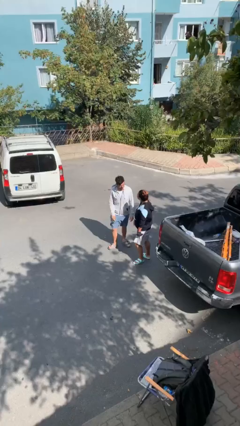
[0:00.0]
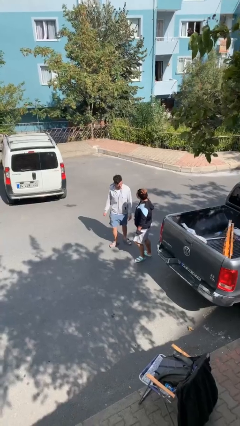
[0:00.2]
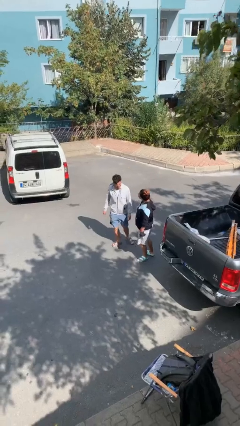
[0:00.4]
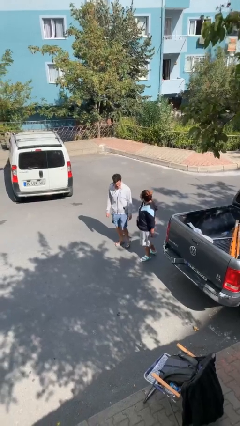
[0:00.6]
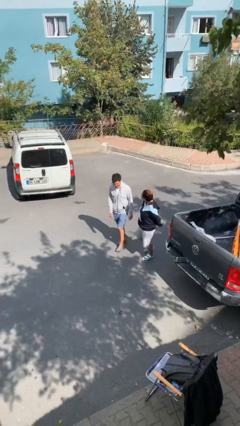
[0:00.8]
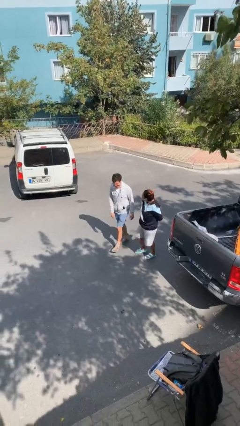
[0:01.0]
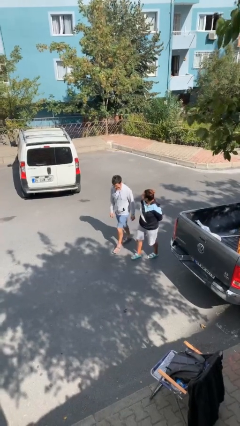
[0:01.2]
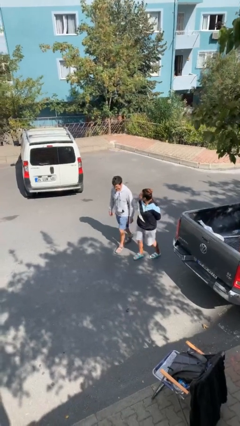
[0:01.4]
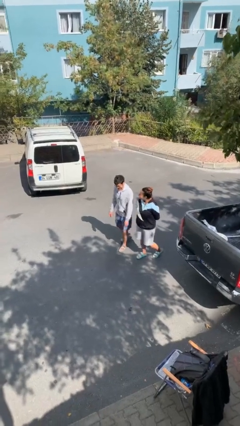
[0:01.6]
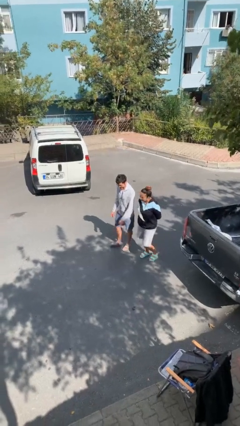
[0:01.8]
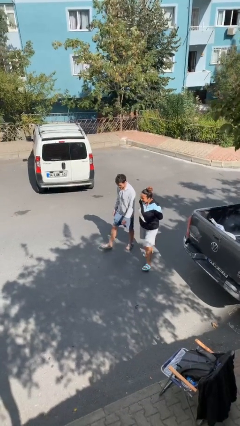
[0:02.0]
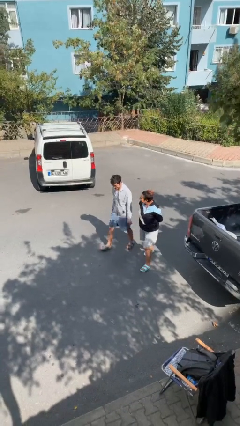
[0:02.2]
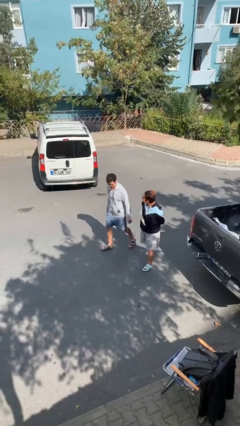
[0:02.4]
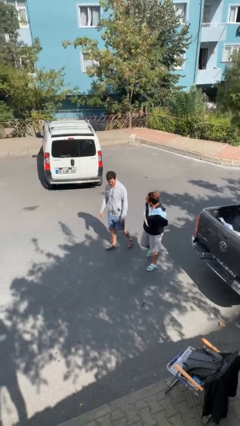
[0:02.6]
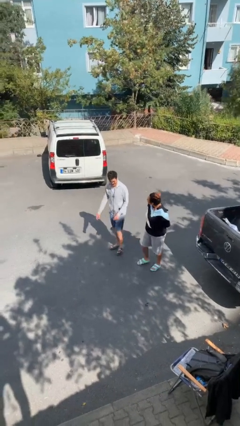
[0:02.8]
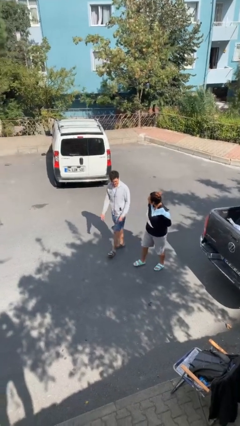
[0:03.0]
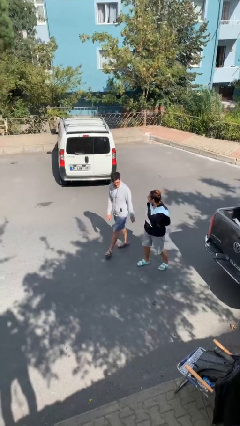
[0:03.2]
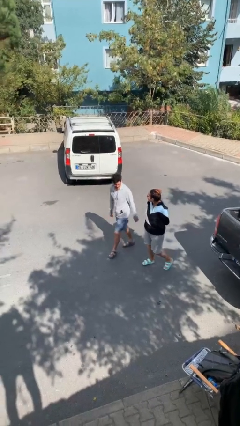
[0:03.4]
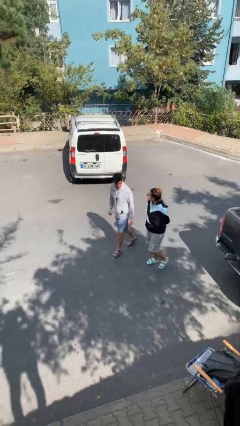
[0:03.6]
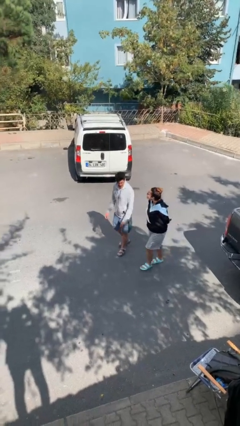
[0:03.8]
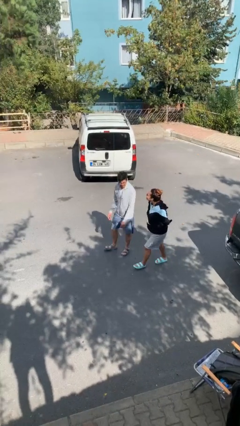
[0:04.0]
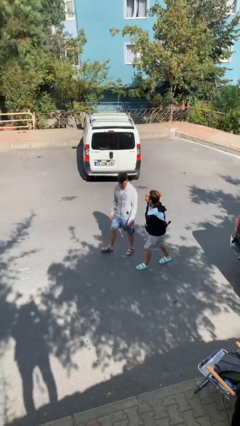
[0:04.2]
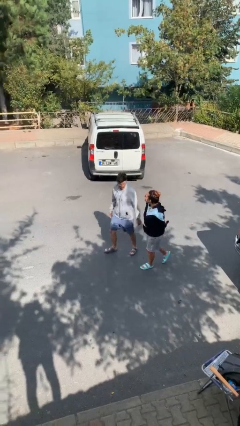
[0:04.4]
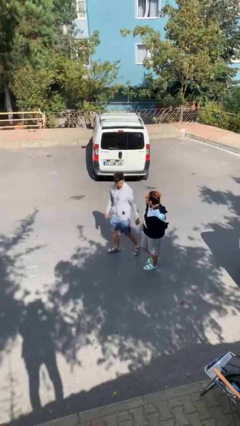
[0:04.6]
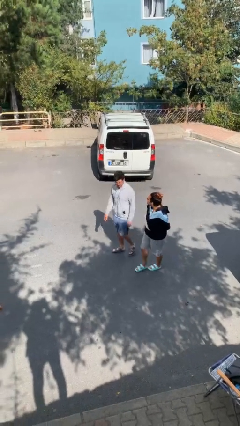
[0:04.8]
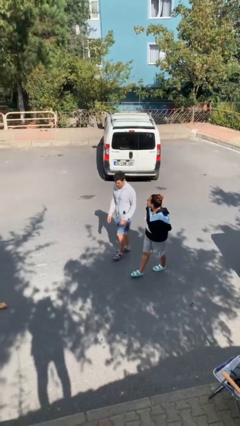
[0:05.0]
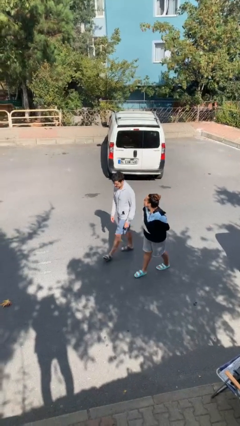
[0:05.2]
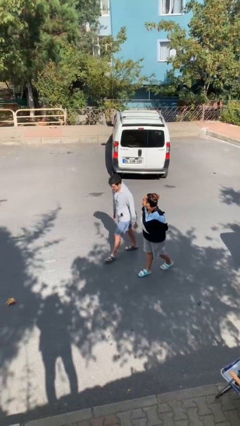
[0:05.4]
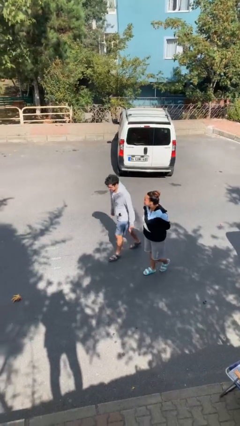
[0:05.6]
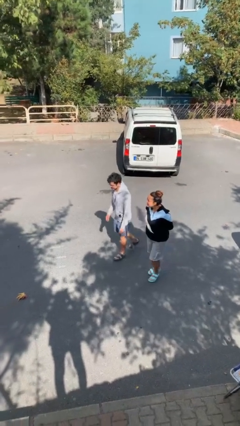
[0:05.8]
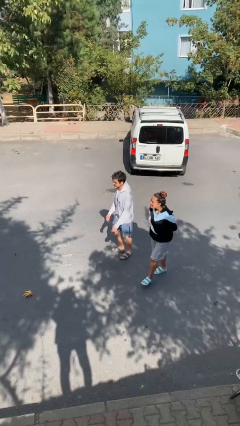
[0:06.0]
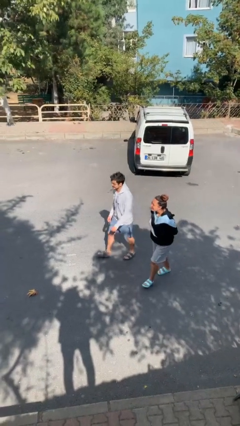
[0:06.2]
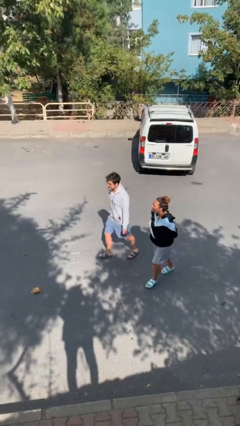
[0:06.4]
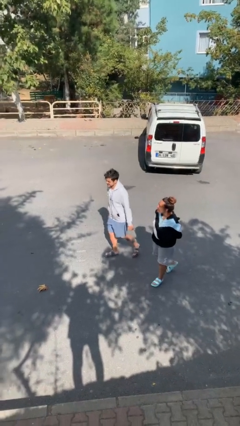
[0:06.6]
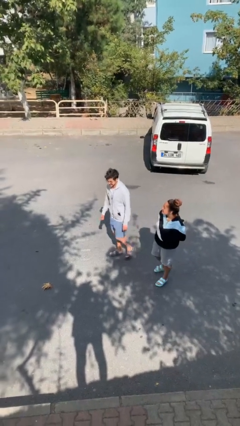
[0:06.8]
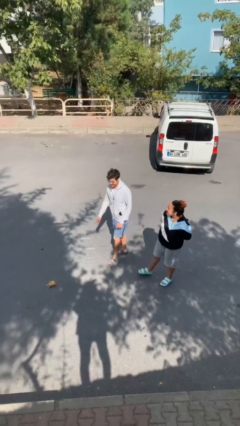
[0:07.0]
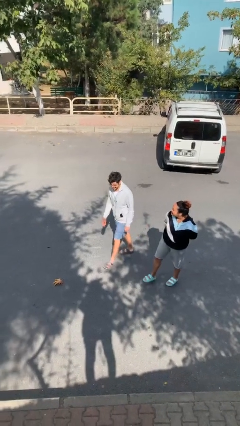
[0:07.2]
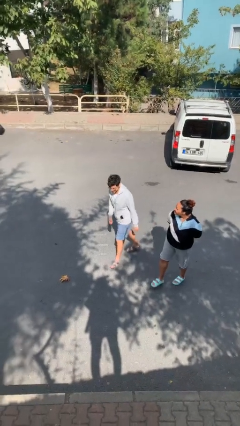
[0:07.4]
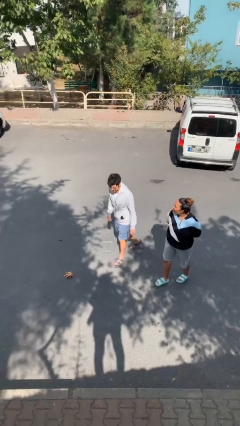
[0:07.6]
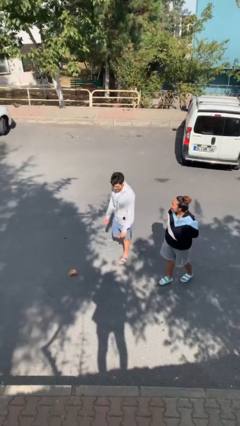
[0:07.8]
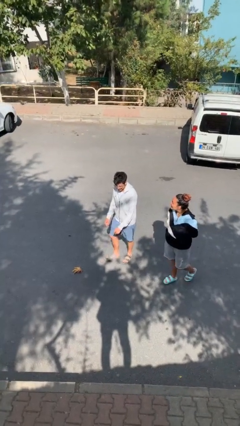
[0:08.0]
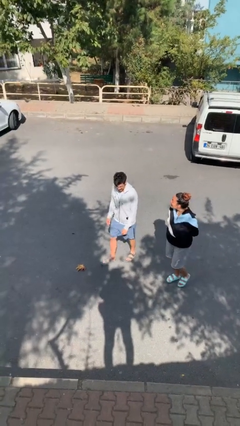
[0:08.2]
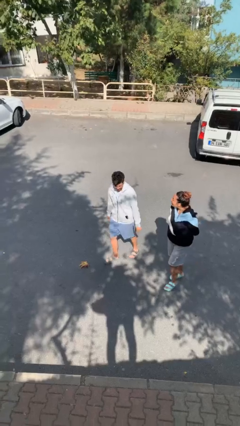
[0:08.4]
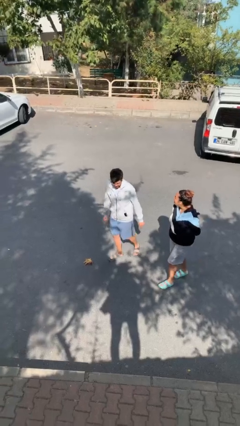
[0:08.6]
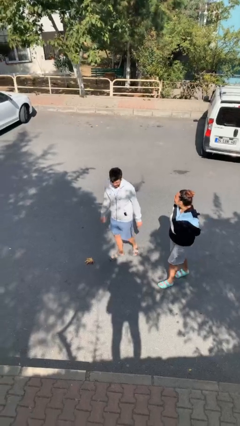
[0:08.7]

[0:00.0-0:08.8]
person talks to person

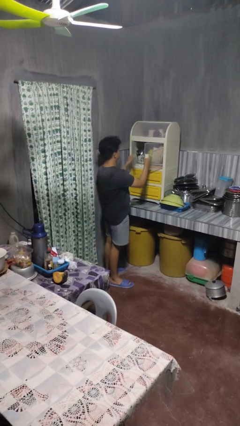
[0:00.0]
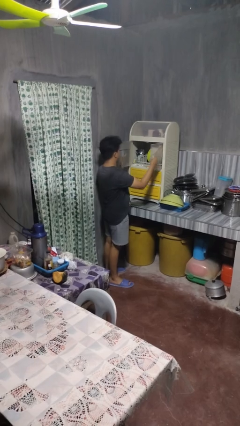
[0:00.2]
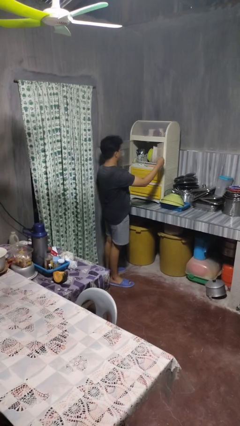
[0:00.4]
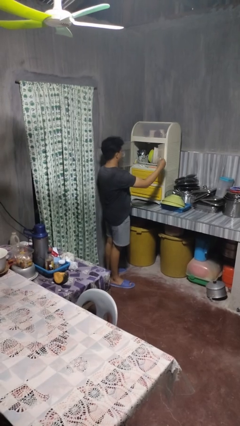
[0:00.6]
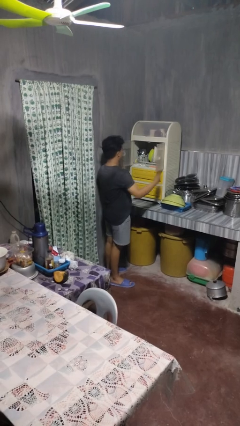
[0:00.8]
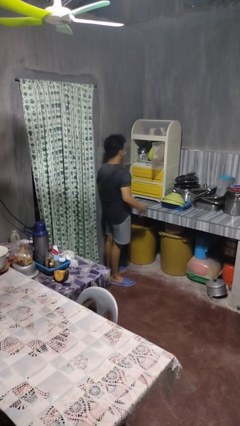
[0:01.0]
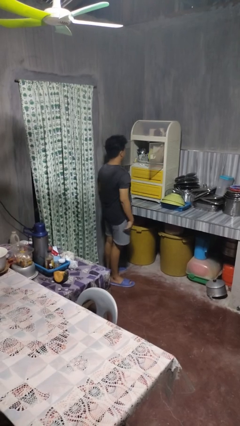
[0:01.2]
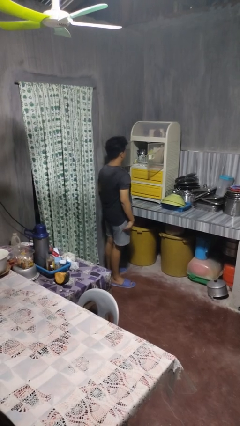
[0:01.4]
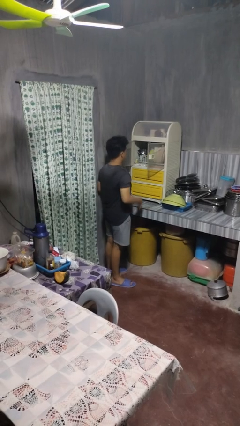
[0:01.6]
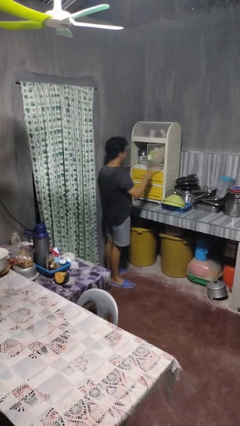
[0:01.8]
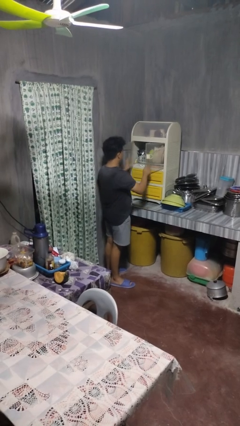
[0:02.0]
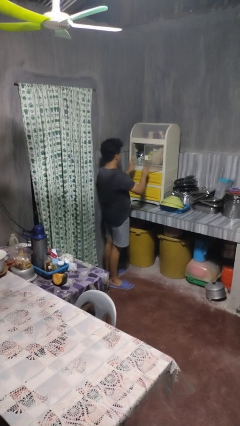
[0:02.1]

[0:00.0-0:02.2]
person opens cabinet

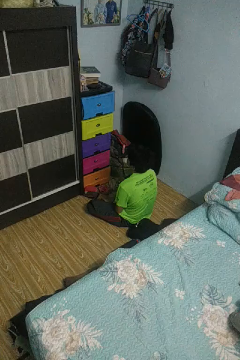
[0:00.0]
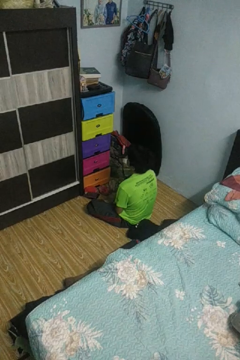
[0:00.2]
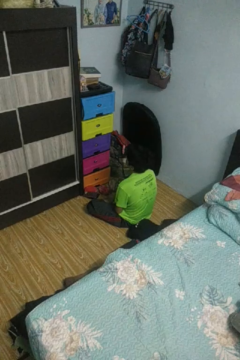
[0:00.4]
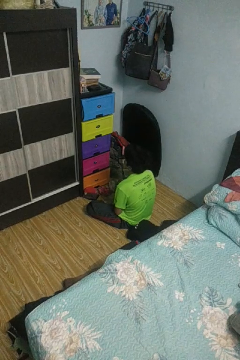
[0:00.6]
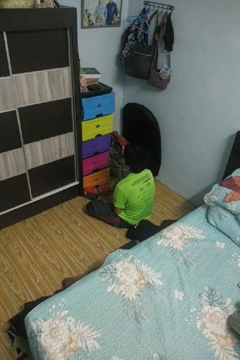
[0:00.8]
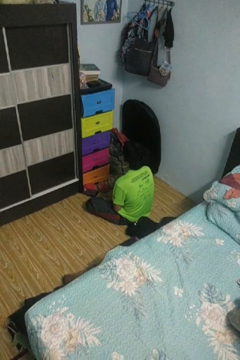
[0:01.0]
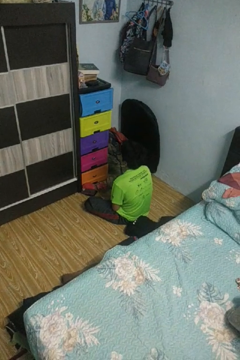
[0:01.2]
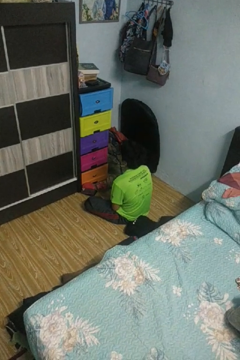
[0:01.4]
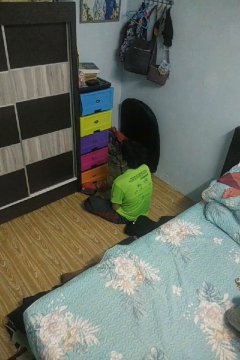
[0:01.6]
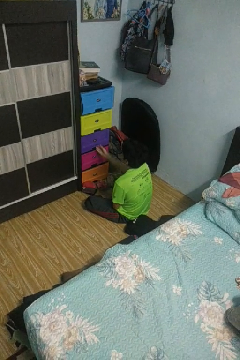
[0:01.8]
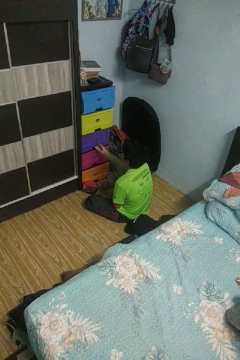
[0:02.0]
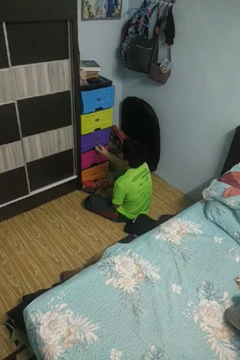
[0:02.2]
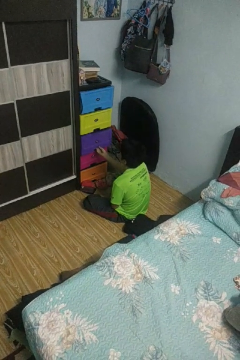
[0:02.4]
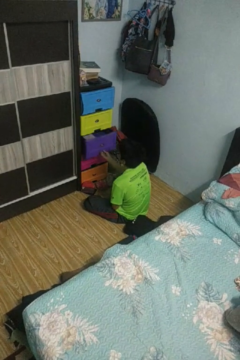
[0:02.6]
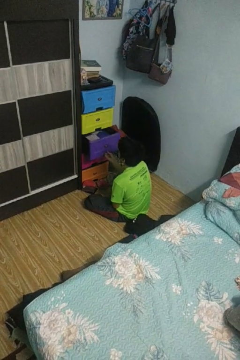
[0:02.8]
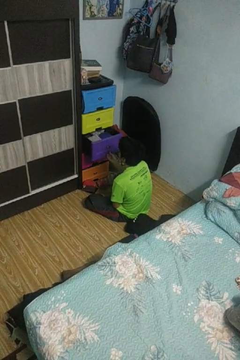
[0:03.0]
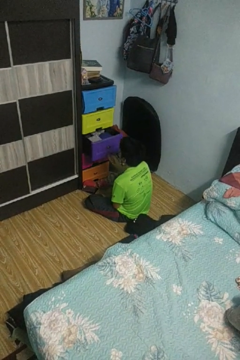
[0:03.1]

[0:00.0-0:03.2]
person opens dresser drawer

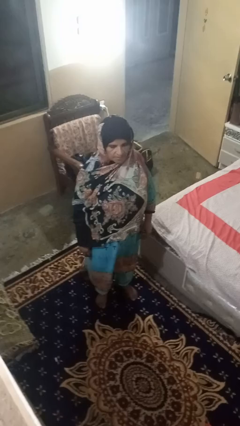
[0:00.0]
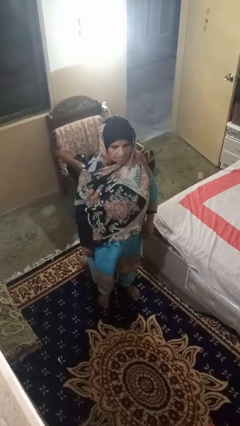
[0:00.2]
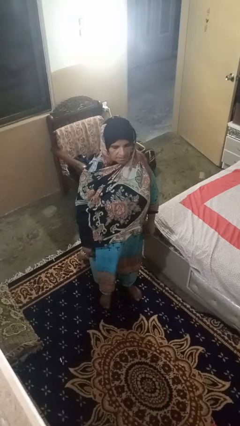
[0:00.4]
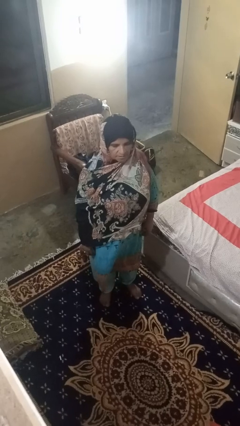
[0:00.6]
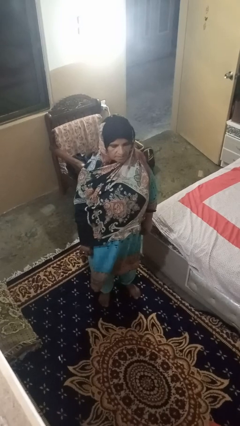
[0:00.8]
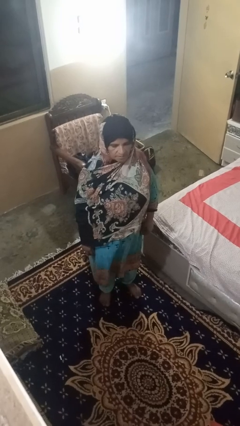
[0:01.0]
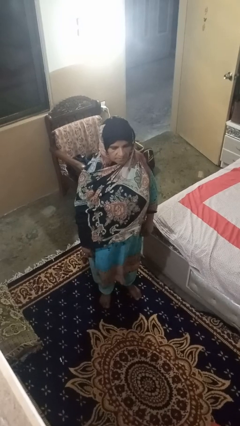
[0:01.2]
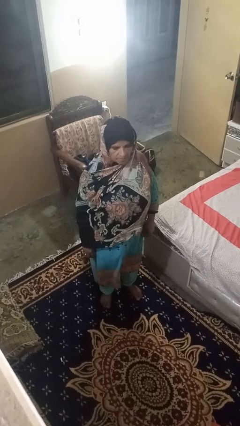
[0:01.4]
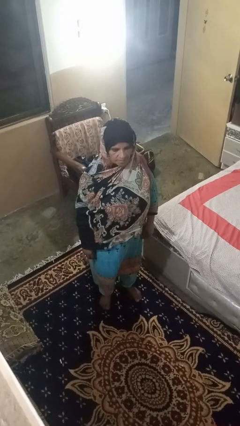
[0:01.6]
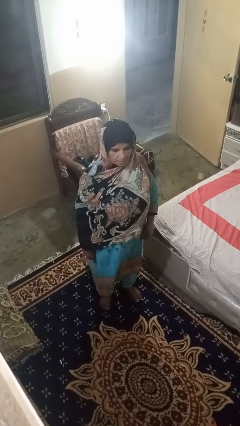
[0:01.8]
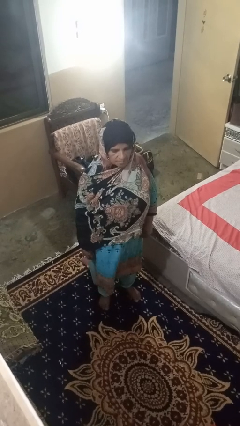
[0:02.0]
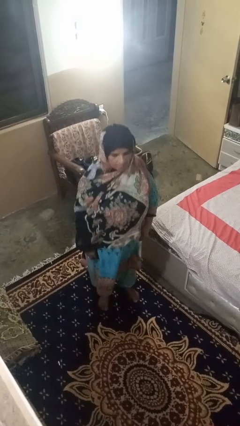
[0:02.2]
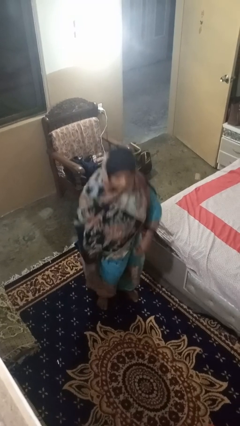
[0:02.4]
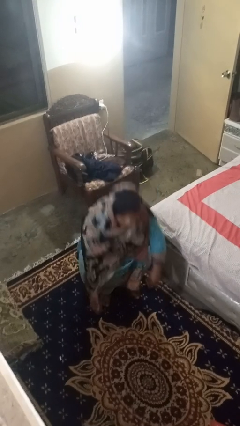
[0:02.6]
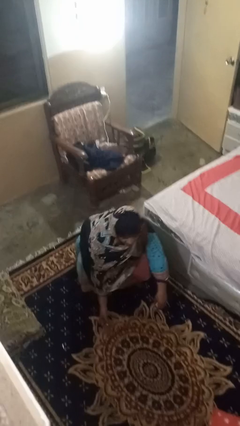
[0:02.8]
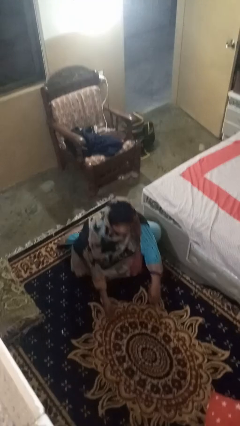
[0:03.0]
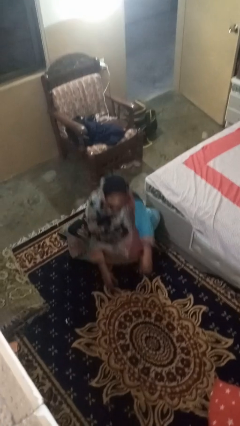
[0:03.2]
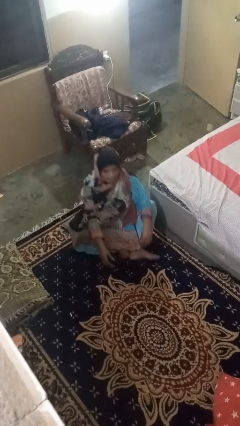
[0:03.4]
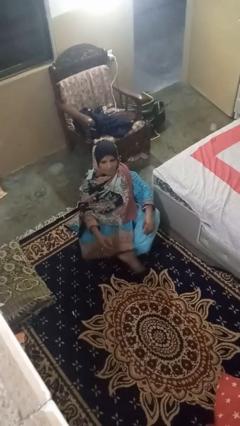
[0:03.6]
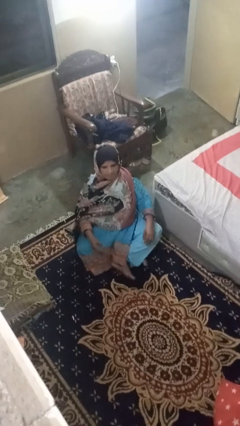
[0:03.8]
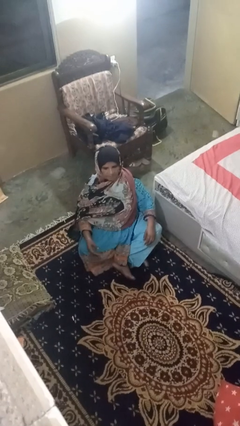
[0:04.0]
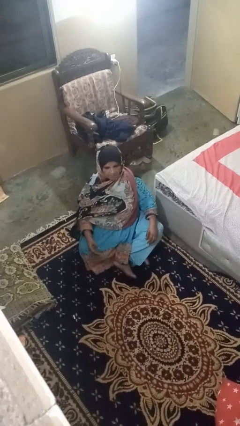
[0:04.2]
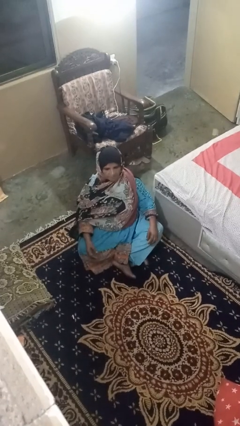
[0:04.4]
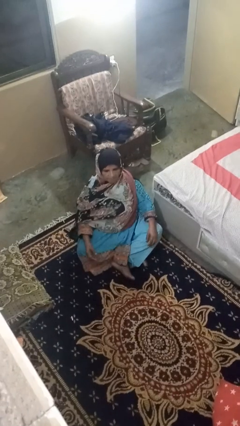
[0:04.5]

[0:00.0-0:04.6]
person sits crisscross
